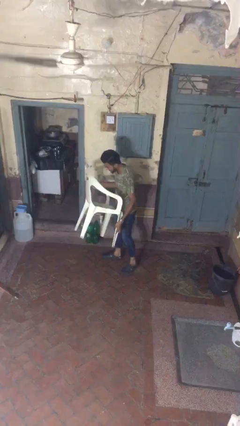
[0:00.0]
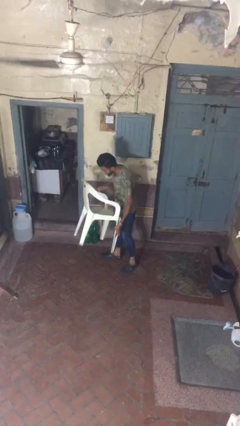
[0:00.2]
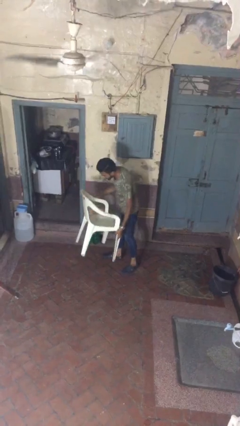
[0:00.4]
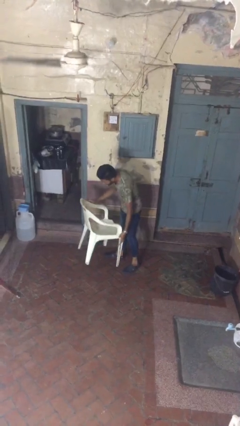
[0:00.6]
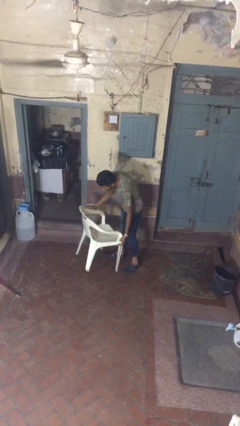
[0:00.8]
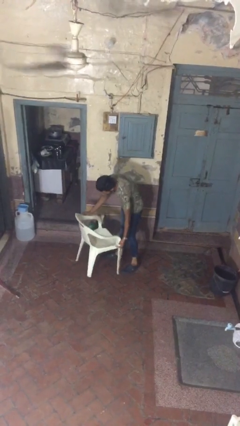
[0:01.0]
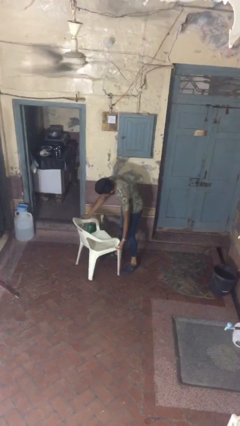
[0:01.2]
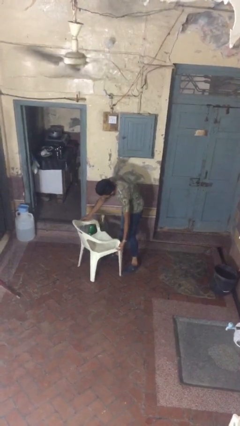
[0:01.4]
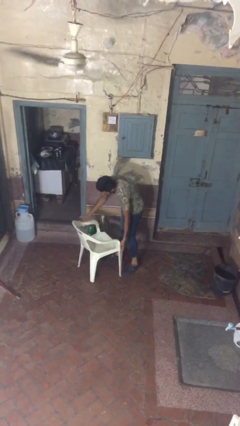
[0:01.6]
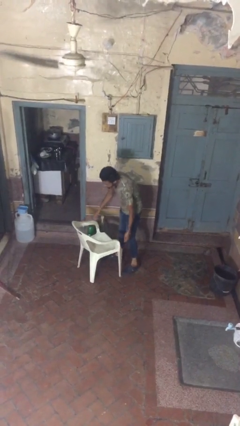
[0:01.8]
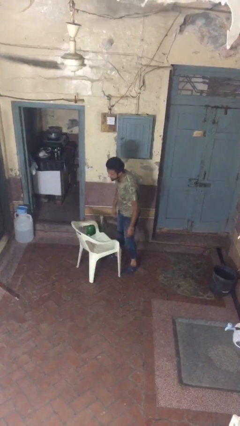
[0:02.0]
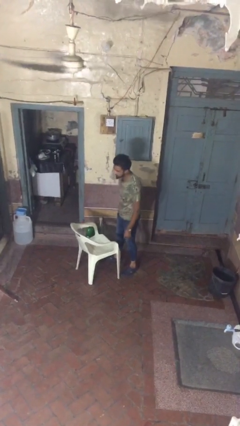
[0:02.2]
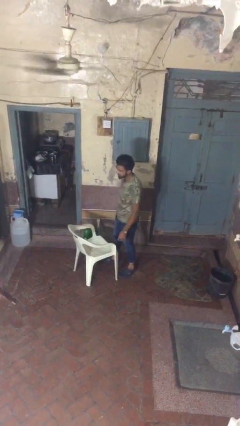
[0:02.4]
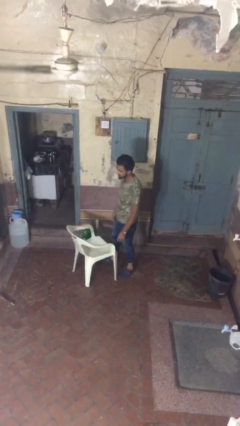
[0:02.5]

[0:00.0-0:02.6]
person puts down object on floor

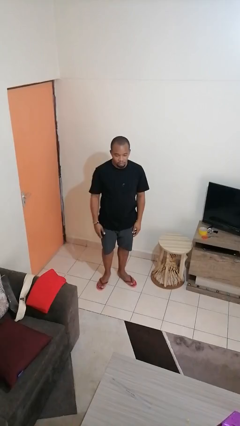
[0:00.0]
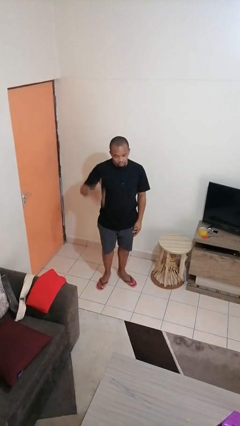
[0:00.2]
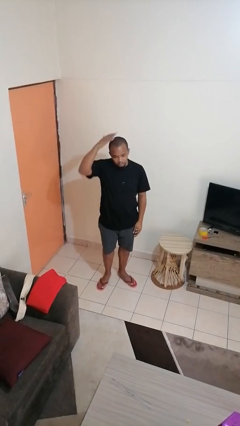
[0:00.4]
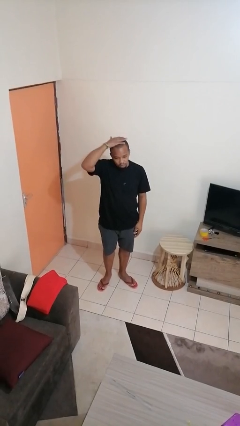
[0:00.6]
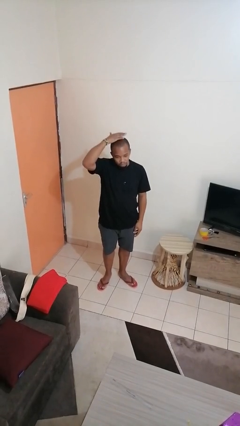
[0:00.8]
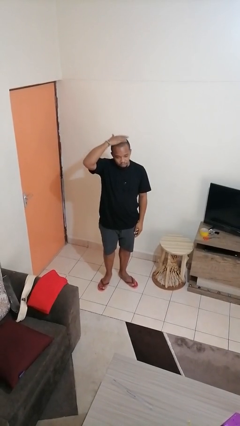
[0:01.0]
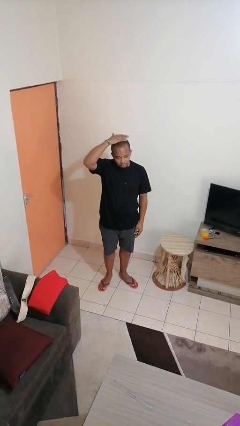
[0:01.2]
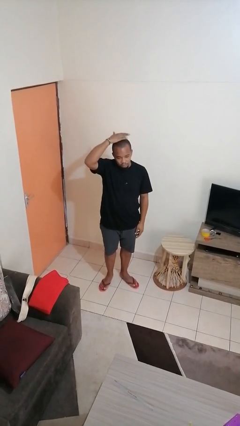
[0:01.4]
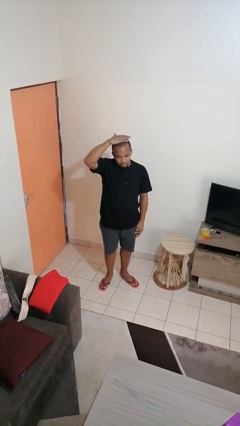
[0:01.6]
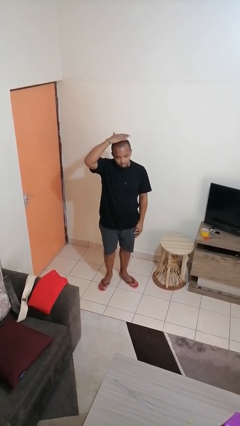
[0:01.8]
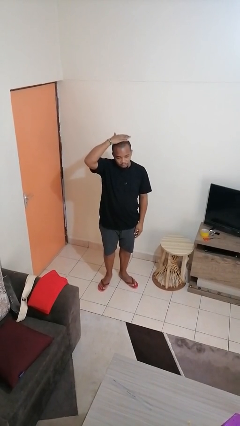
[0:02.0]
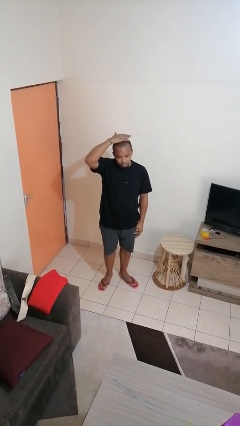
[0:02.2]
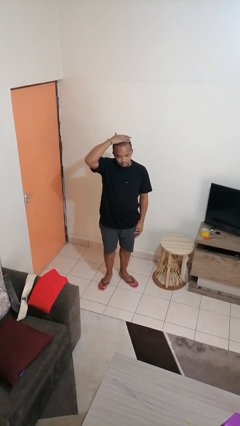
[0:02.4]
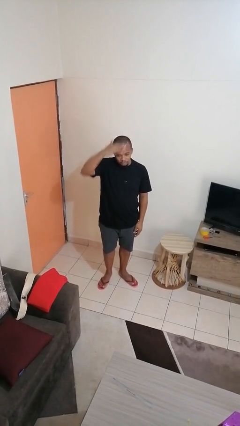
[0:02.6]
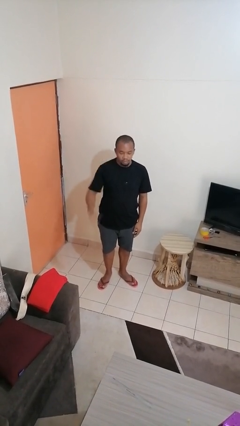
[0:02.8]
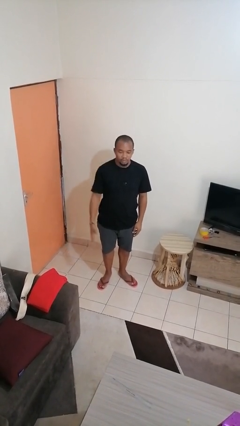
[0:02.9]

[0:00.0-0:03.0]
person pats head

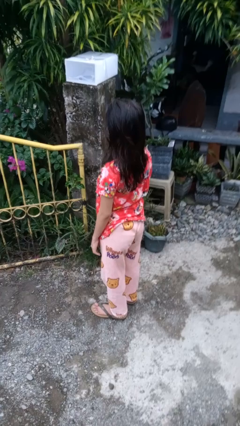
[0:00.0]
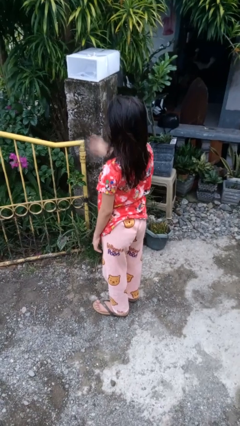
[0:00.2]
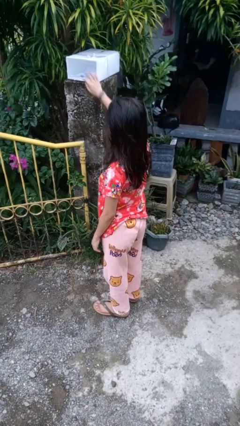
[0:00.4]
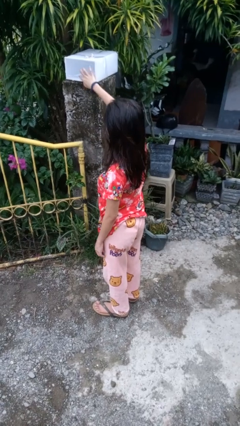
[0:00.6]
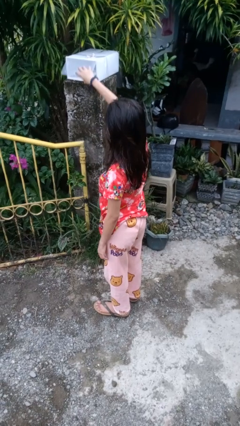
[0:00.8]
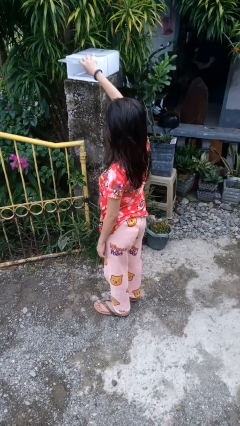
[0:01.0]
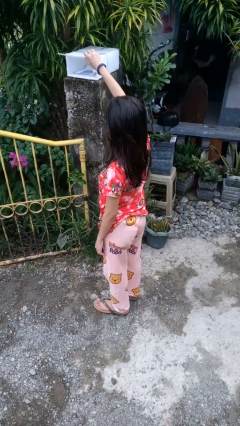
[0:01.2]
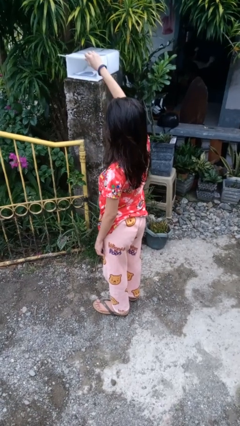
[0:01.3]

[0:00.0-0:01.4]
person opens mailbox

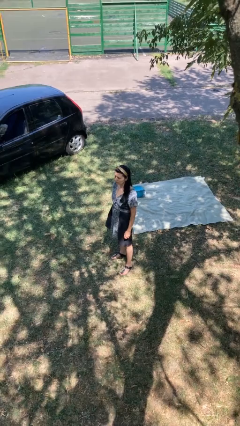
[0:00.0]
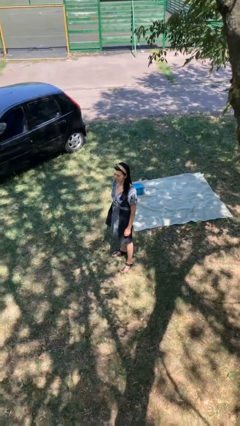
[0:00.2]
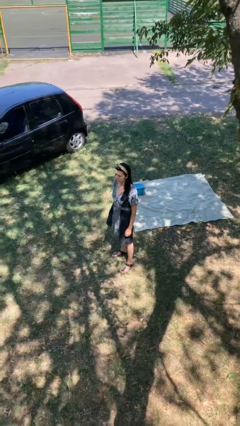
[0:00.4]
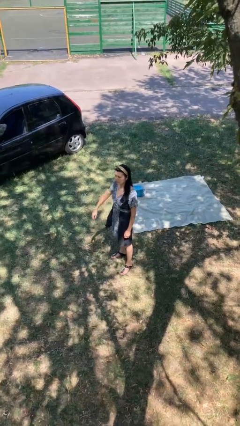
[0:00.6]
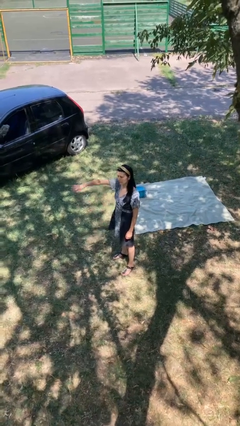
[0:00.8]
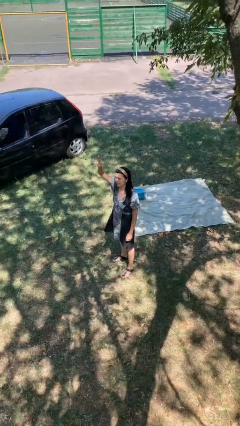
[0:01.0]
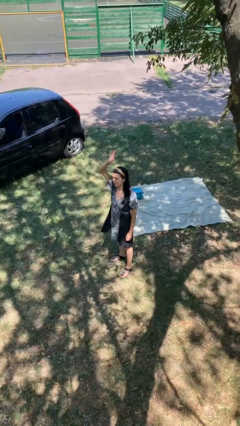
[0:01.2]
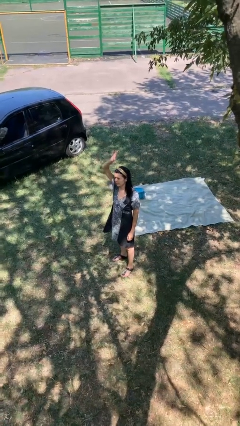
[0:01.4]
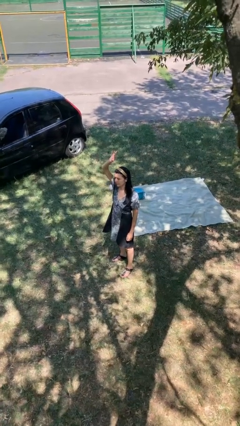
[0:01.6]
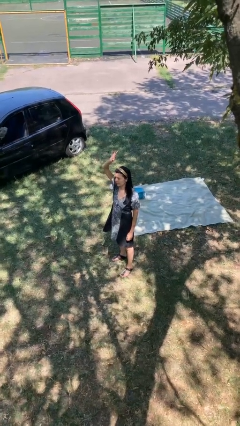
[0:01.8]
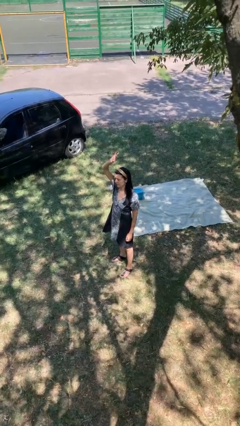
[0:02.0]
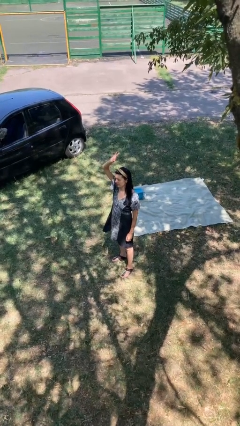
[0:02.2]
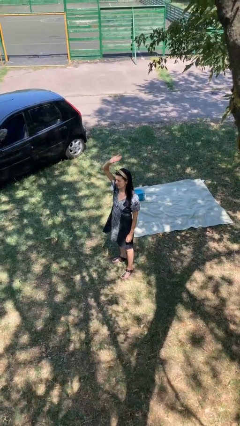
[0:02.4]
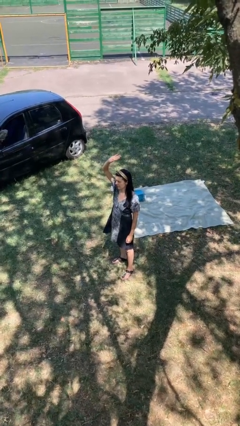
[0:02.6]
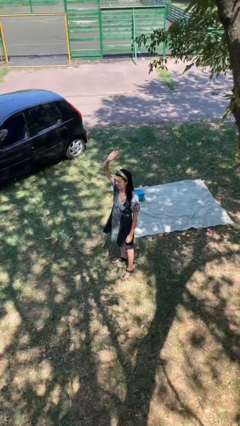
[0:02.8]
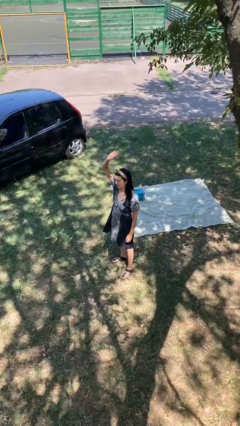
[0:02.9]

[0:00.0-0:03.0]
person gestures raise hand

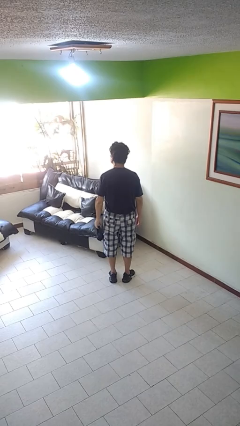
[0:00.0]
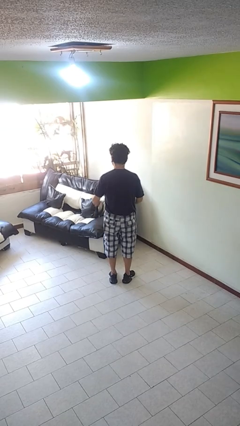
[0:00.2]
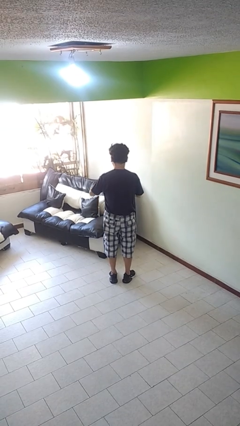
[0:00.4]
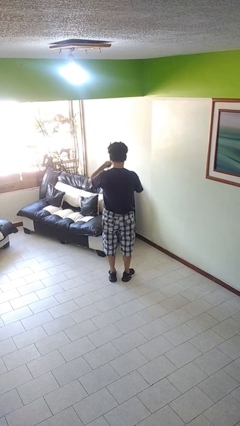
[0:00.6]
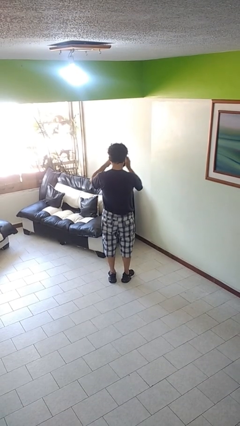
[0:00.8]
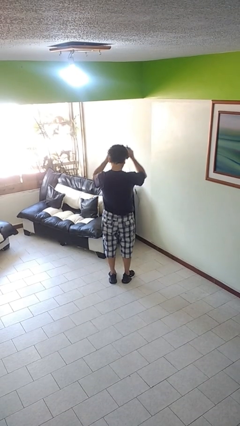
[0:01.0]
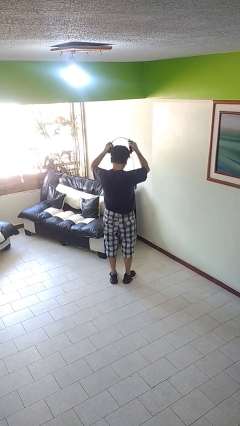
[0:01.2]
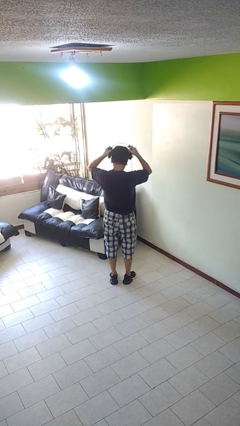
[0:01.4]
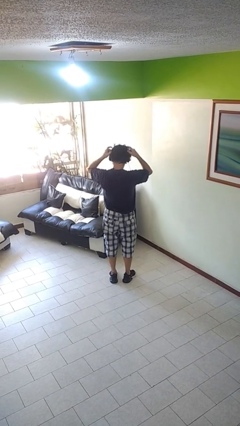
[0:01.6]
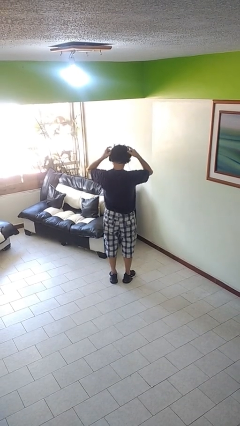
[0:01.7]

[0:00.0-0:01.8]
person puts on headphones

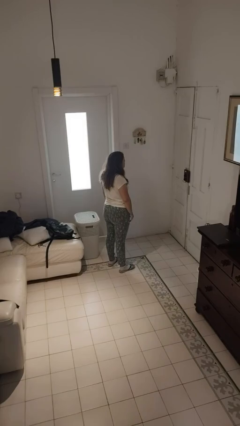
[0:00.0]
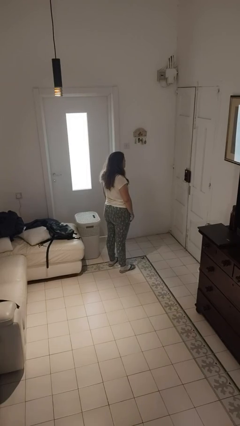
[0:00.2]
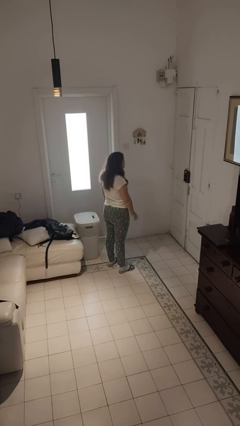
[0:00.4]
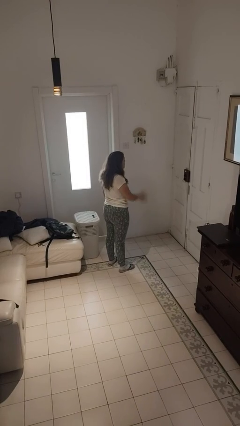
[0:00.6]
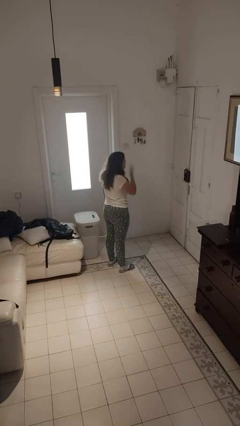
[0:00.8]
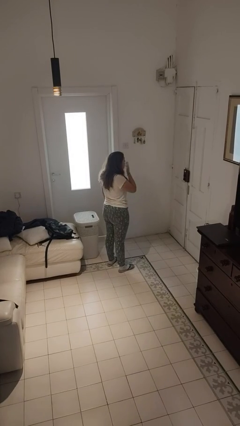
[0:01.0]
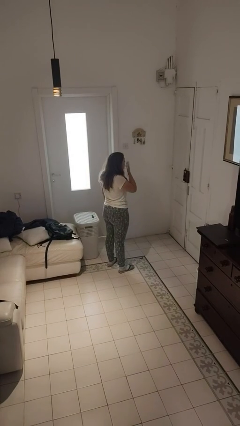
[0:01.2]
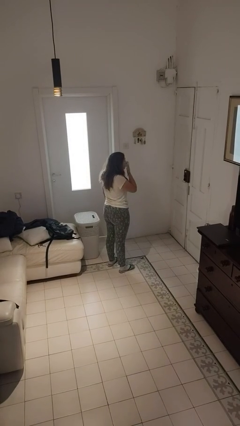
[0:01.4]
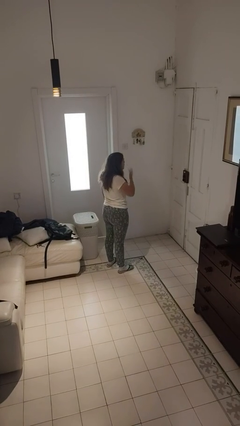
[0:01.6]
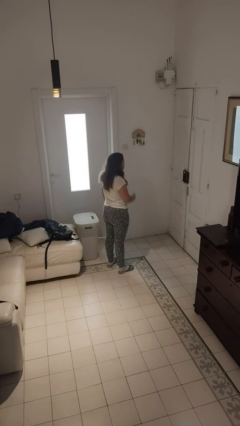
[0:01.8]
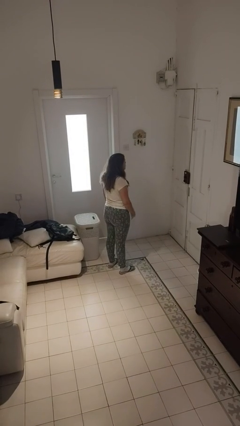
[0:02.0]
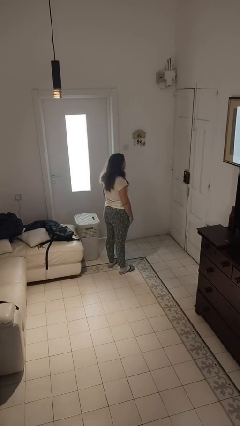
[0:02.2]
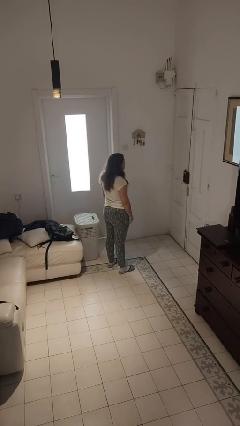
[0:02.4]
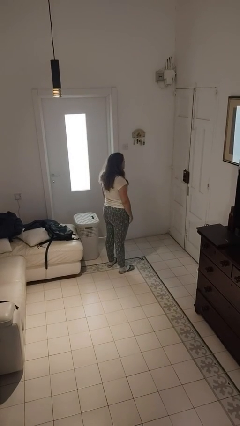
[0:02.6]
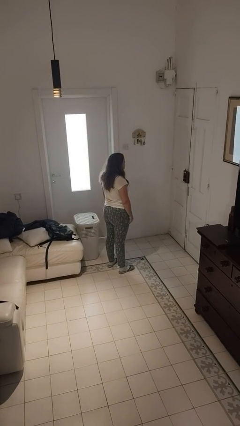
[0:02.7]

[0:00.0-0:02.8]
person yawns

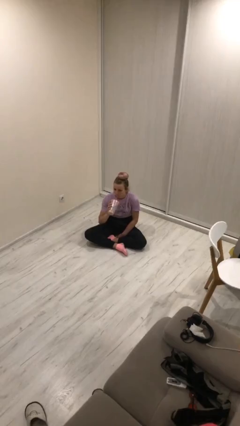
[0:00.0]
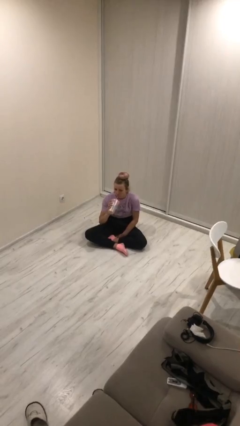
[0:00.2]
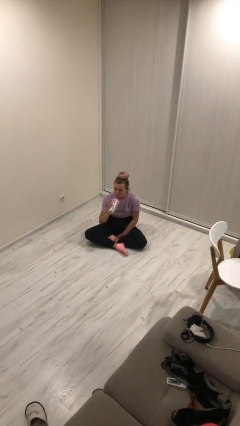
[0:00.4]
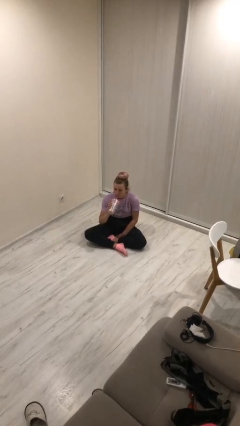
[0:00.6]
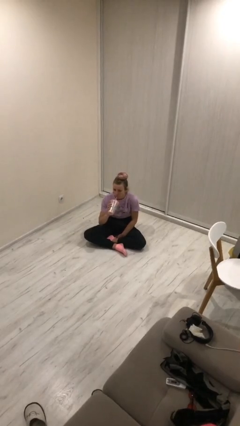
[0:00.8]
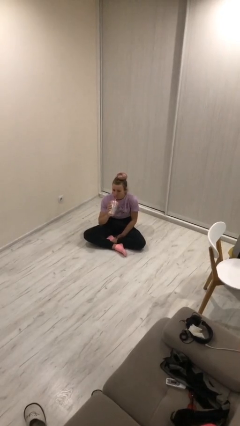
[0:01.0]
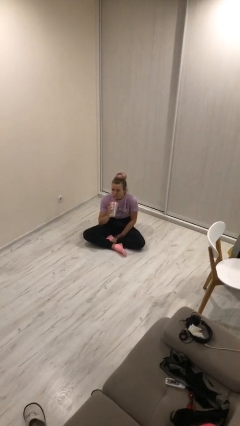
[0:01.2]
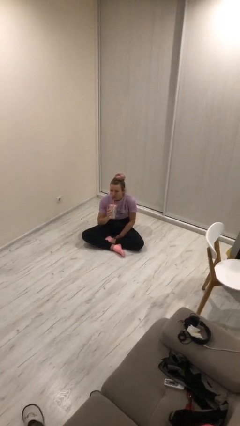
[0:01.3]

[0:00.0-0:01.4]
person drinks from straw

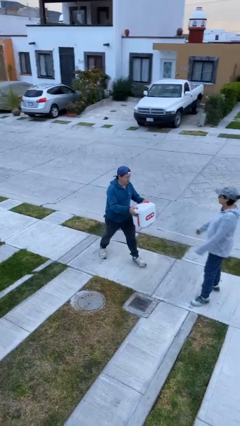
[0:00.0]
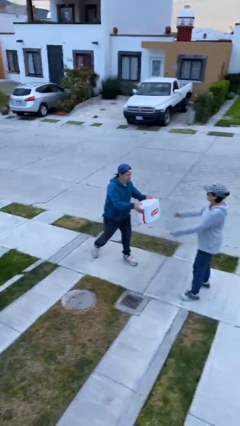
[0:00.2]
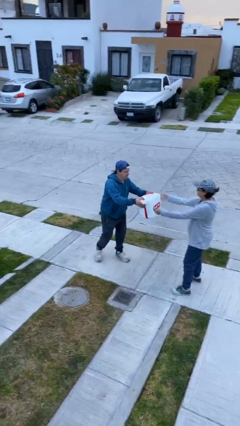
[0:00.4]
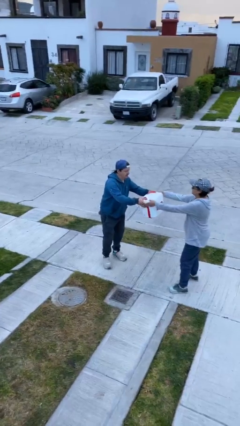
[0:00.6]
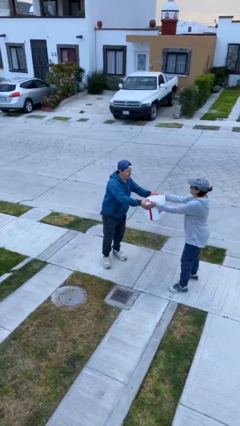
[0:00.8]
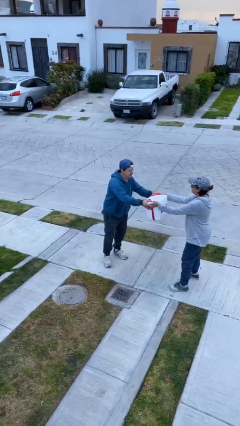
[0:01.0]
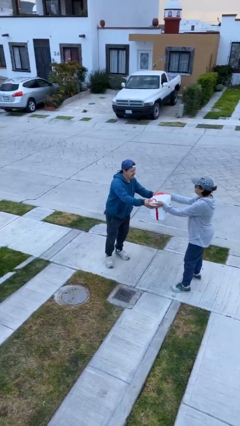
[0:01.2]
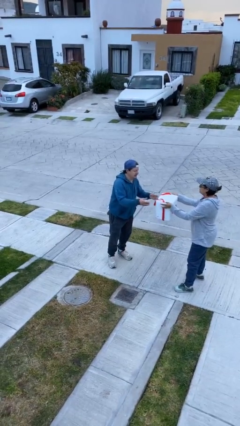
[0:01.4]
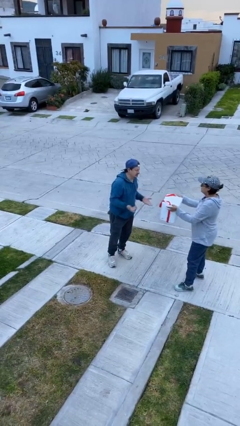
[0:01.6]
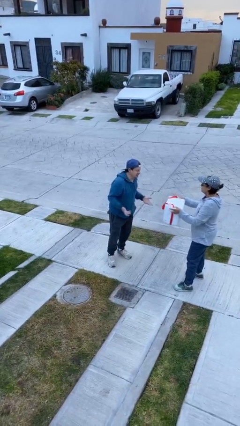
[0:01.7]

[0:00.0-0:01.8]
person transfers object to person
